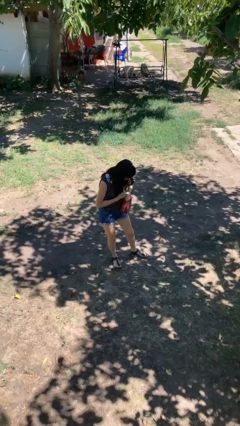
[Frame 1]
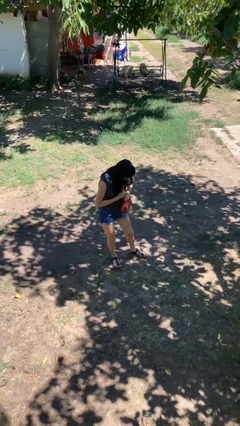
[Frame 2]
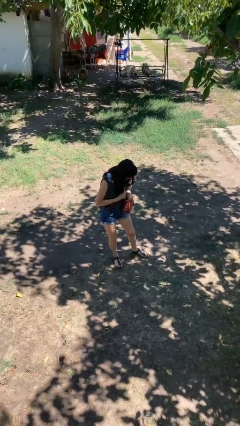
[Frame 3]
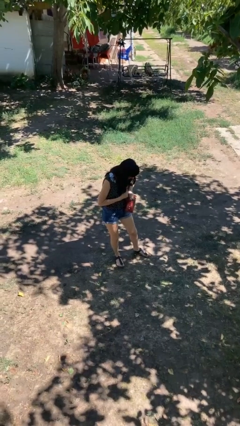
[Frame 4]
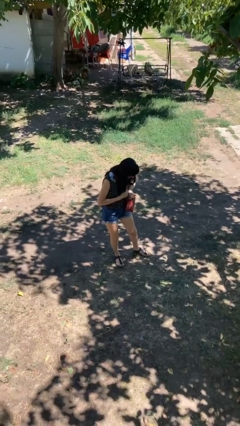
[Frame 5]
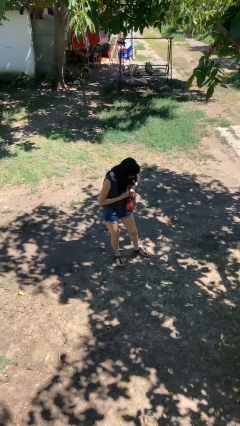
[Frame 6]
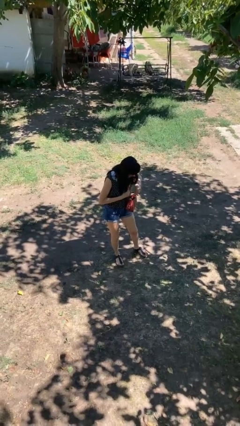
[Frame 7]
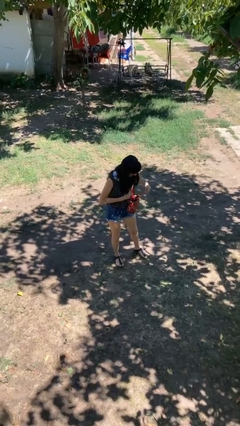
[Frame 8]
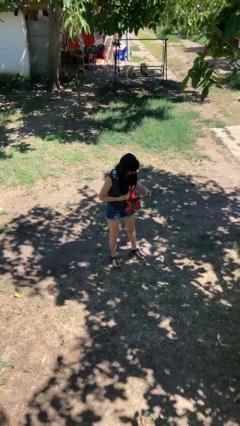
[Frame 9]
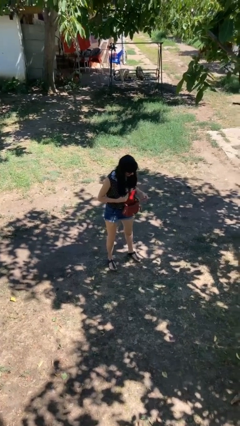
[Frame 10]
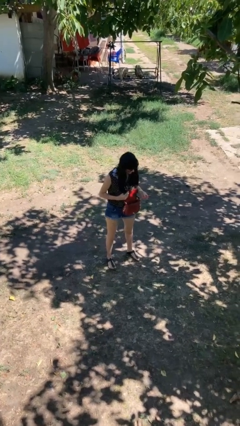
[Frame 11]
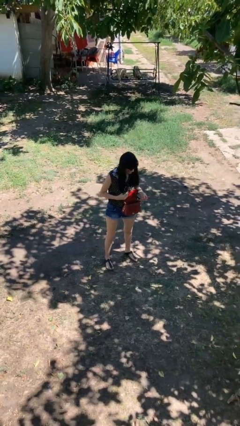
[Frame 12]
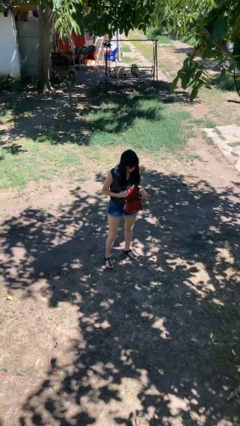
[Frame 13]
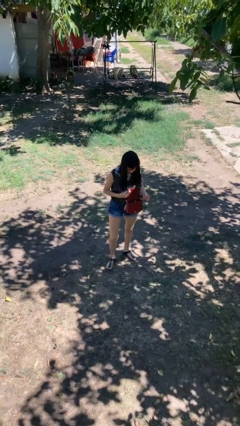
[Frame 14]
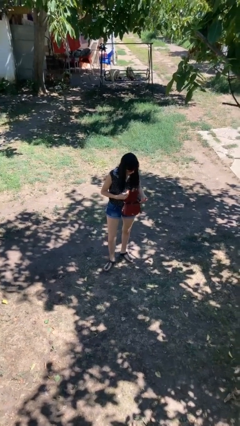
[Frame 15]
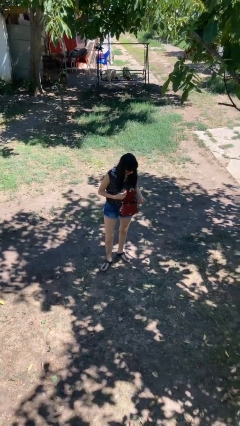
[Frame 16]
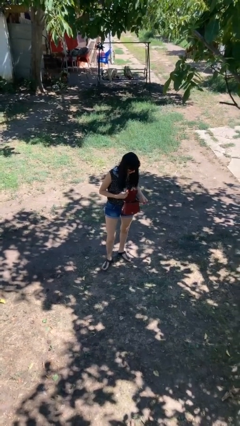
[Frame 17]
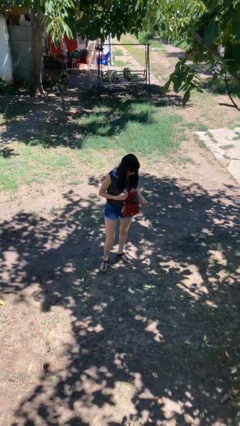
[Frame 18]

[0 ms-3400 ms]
person takes object from purse

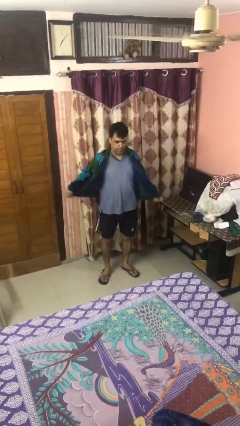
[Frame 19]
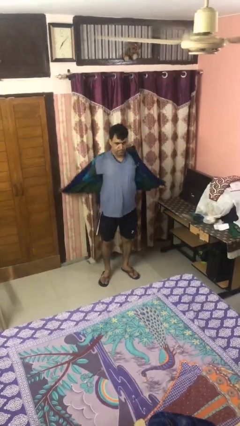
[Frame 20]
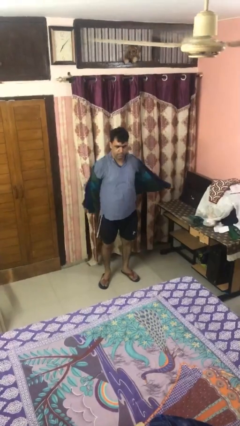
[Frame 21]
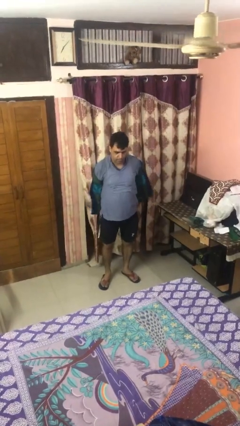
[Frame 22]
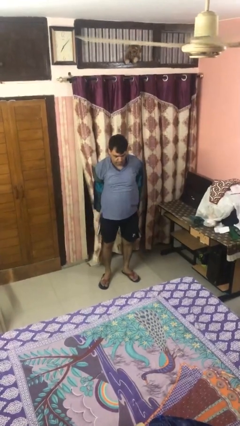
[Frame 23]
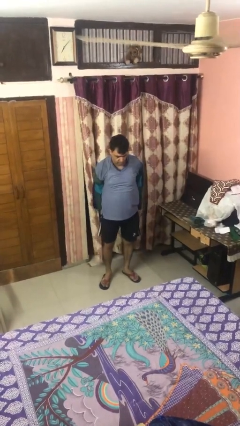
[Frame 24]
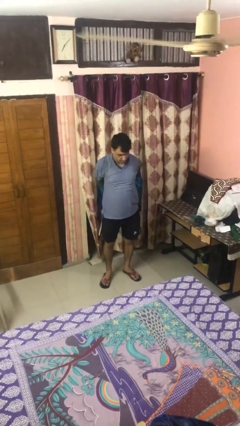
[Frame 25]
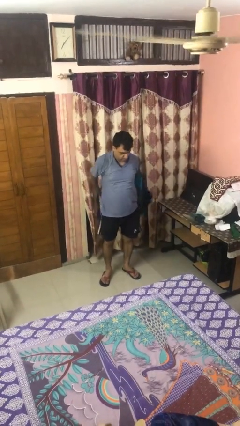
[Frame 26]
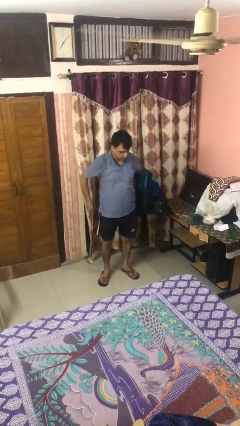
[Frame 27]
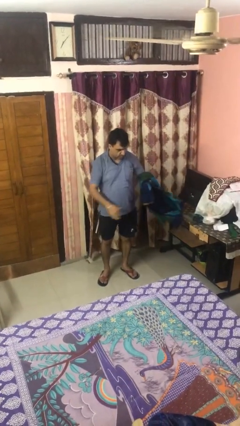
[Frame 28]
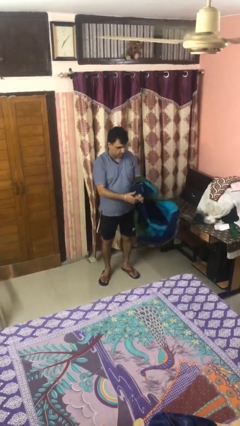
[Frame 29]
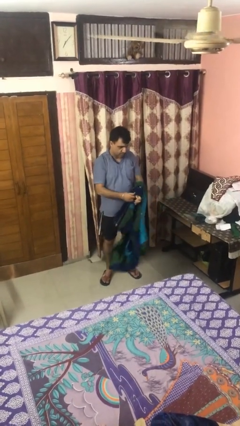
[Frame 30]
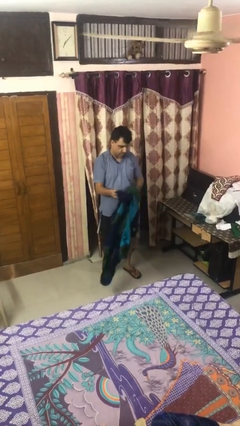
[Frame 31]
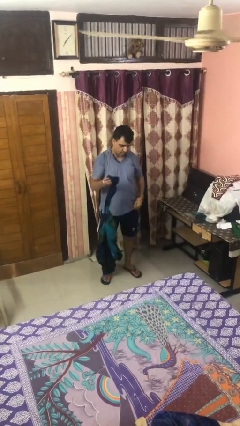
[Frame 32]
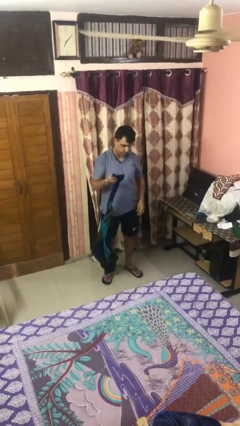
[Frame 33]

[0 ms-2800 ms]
person takes off jacket

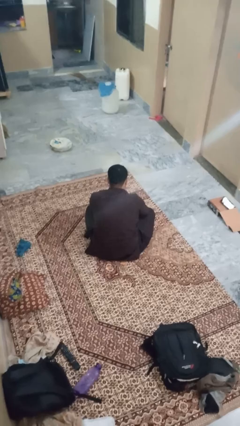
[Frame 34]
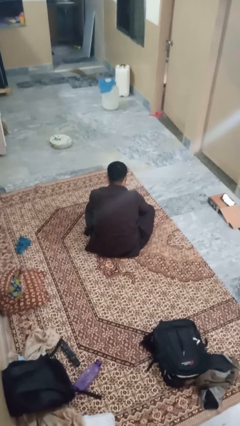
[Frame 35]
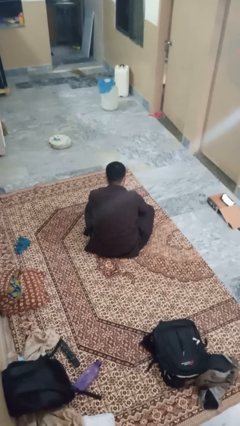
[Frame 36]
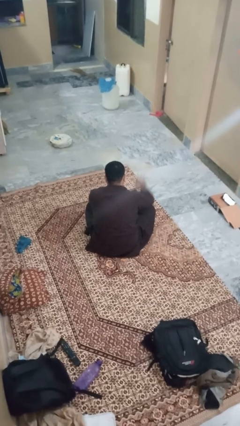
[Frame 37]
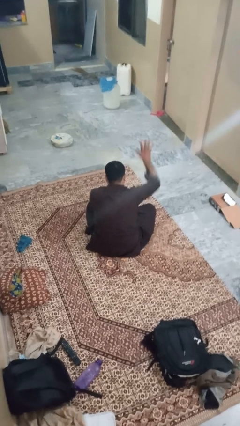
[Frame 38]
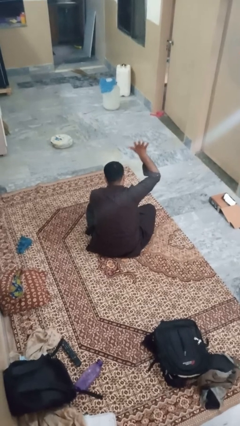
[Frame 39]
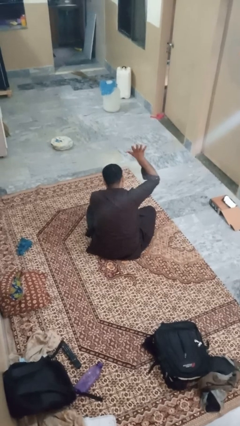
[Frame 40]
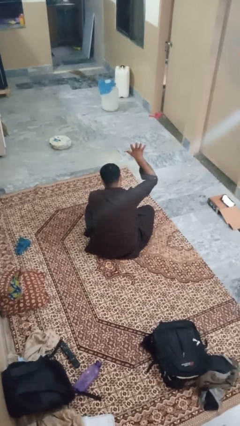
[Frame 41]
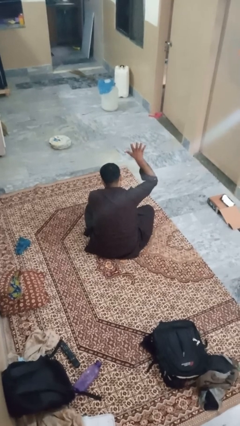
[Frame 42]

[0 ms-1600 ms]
person gestures number five

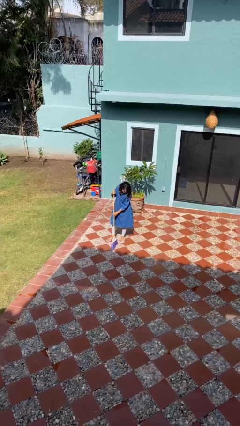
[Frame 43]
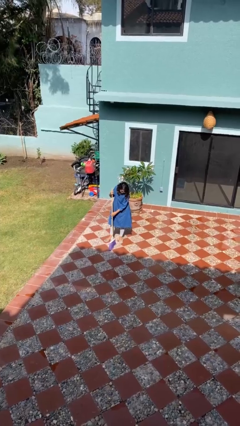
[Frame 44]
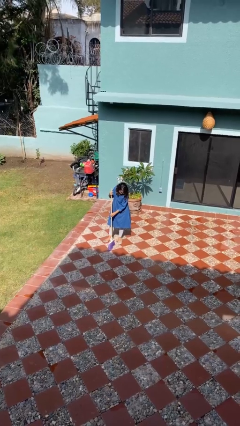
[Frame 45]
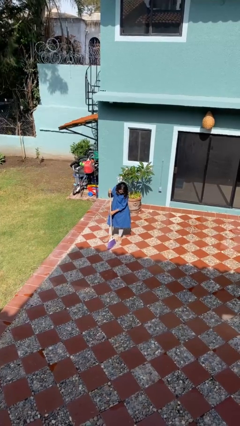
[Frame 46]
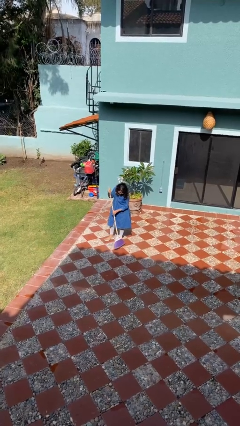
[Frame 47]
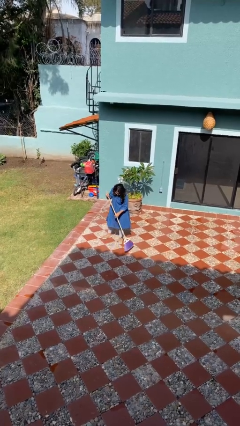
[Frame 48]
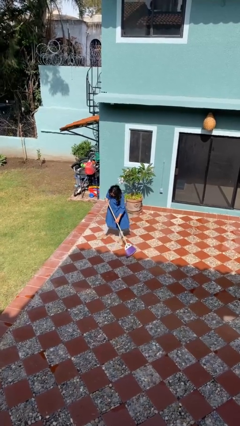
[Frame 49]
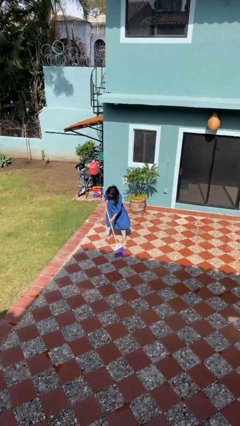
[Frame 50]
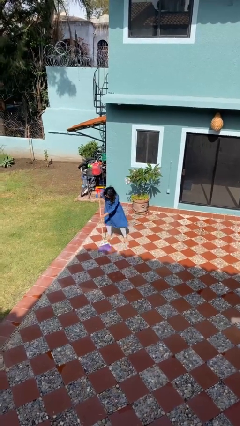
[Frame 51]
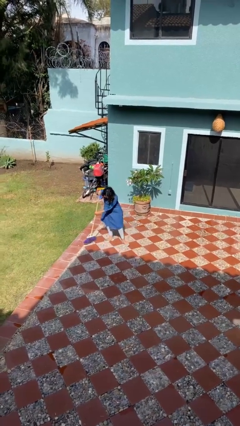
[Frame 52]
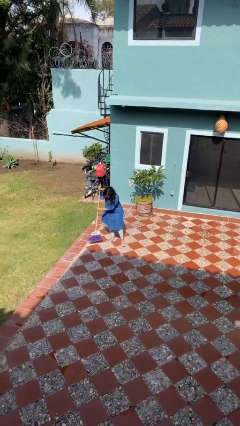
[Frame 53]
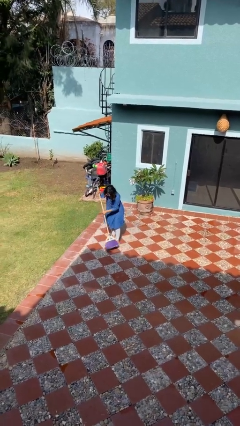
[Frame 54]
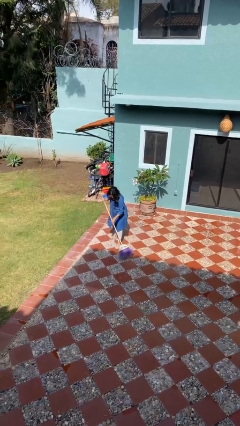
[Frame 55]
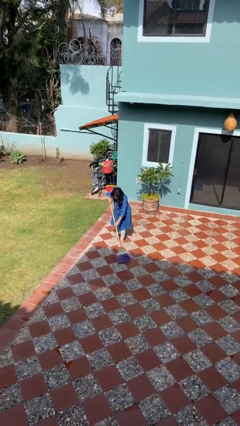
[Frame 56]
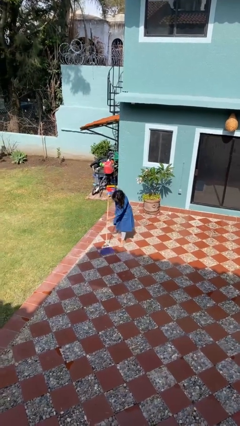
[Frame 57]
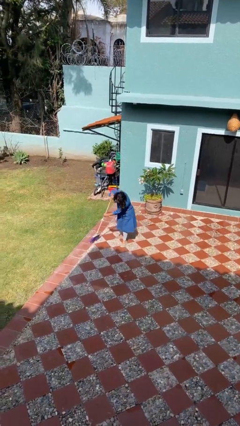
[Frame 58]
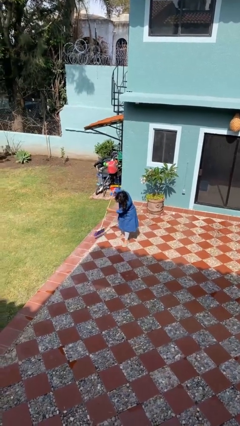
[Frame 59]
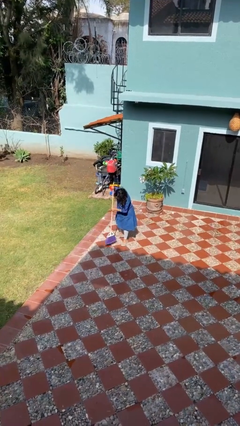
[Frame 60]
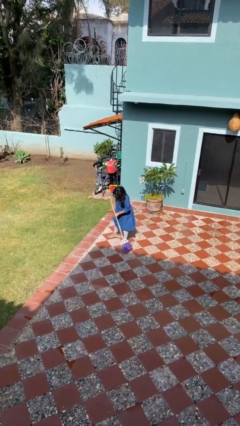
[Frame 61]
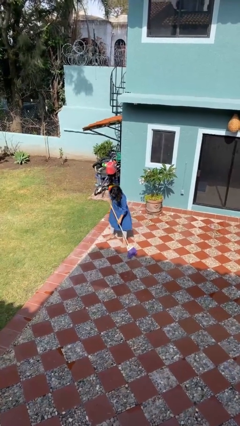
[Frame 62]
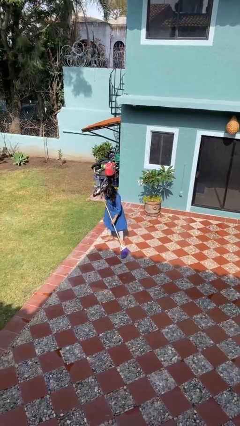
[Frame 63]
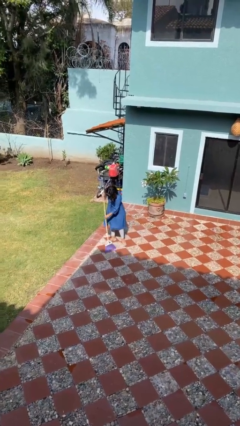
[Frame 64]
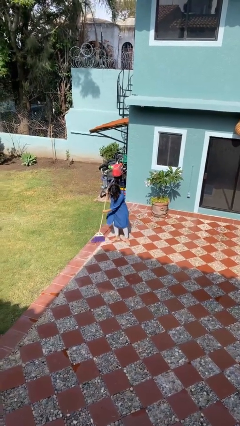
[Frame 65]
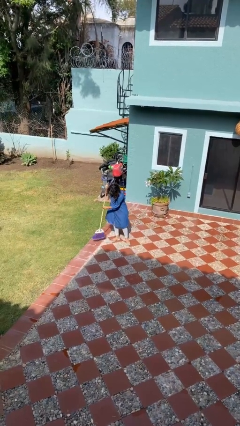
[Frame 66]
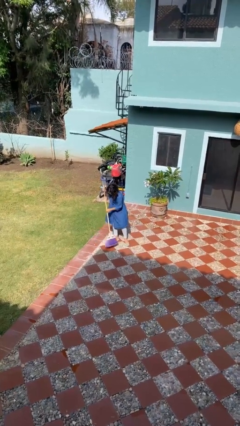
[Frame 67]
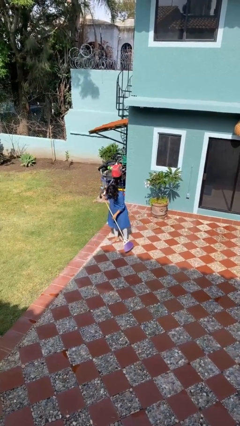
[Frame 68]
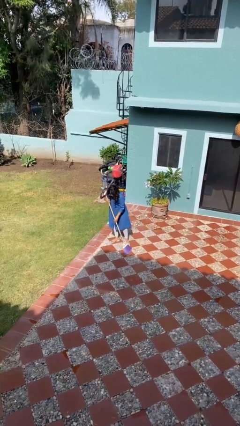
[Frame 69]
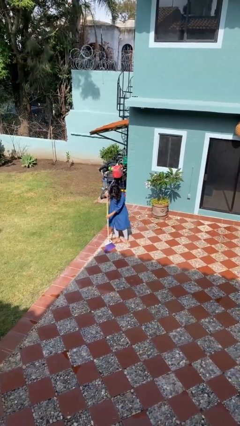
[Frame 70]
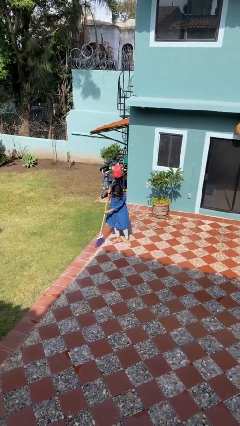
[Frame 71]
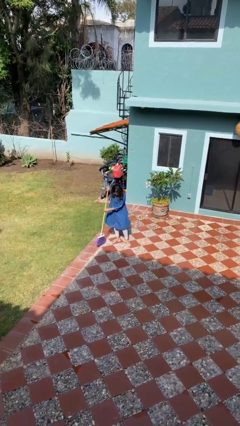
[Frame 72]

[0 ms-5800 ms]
person sweeps floor

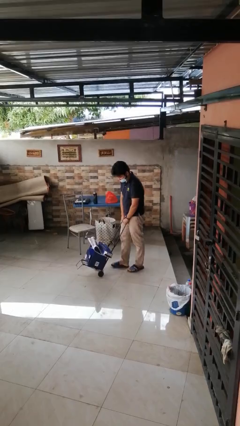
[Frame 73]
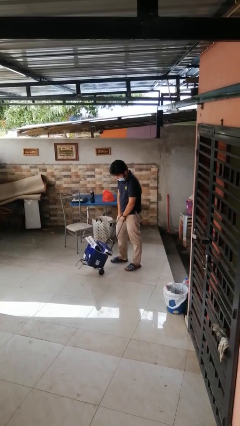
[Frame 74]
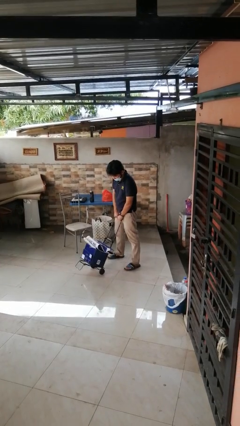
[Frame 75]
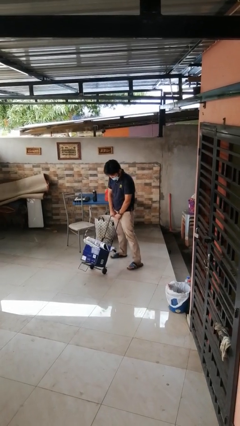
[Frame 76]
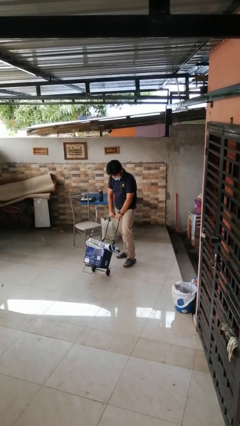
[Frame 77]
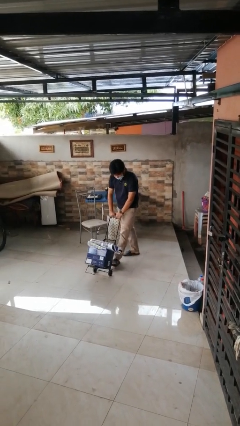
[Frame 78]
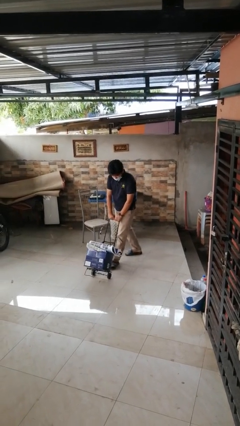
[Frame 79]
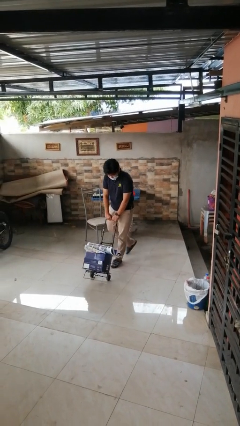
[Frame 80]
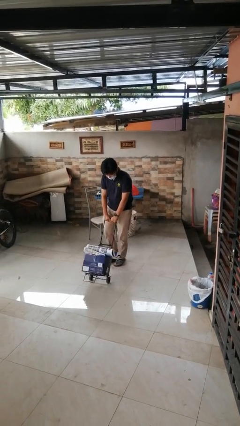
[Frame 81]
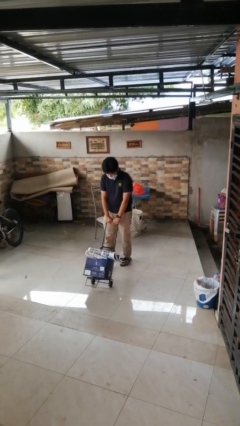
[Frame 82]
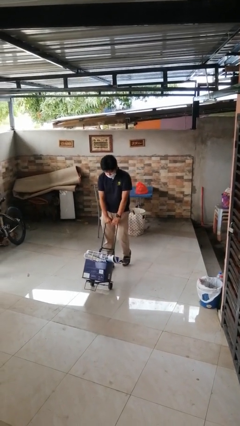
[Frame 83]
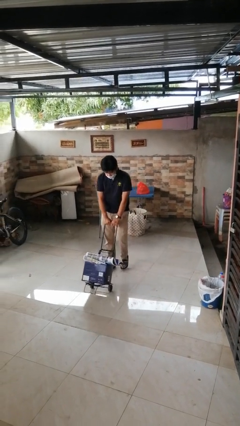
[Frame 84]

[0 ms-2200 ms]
person pushes wheeled cart

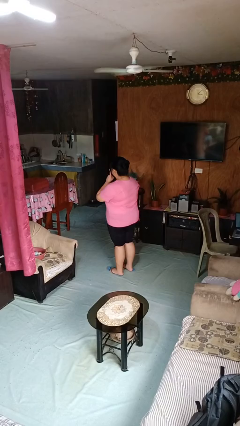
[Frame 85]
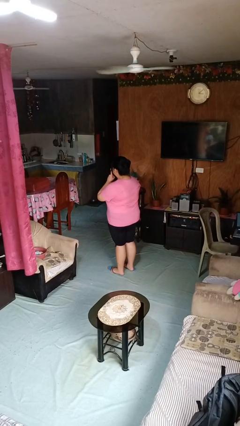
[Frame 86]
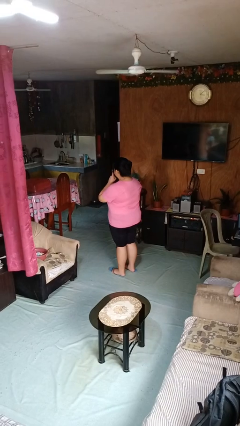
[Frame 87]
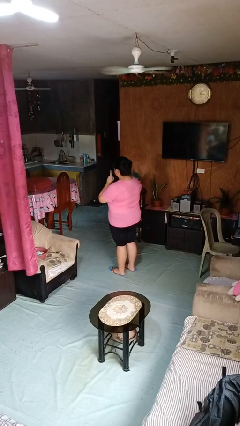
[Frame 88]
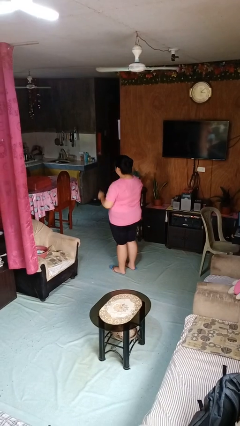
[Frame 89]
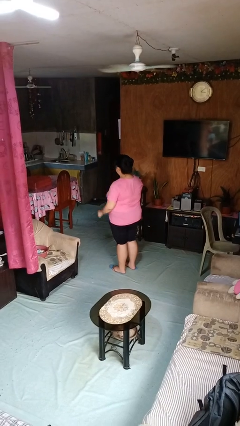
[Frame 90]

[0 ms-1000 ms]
person gestures blow kiss

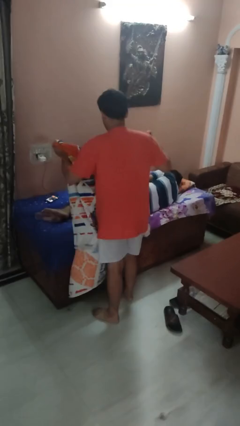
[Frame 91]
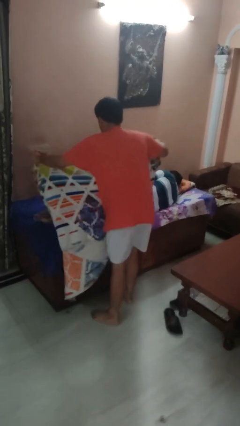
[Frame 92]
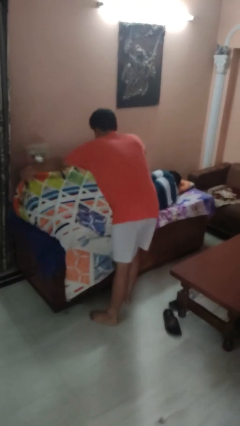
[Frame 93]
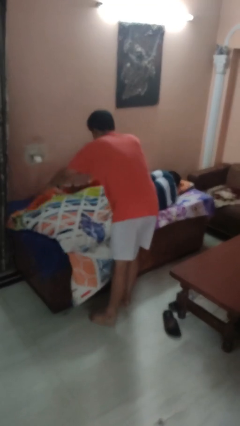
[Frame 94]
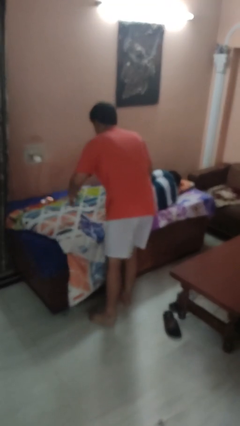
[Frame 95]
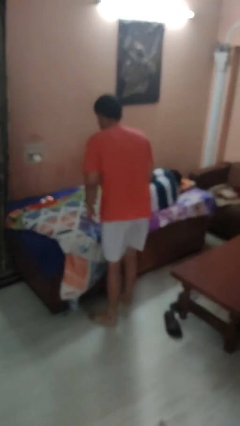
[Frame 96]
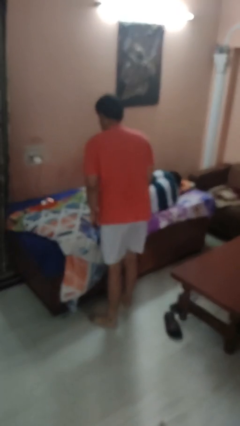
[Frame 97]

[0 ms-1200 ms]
person covers friend with blanket
